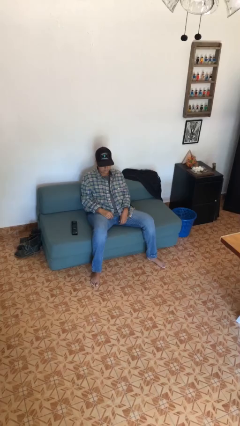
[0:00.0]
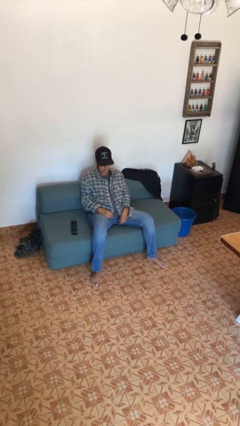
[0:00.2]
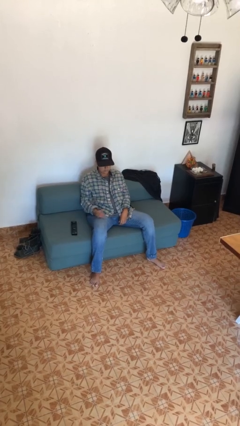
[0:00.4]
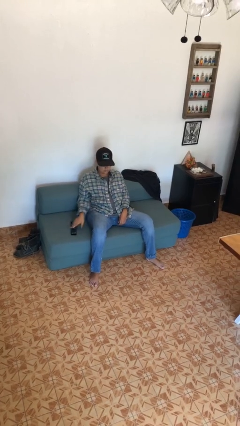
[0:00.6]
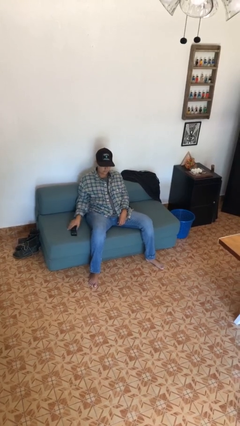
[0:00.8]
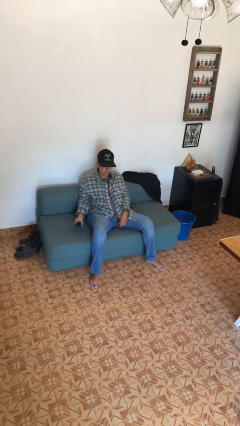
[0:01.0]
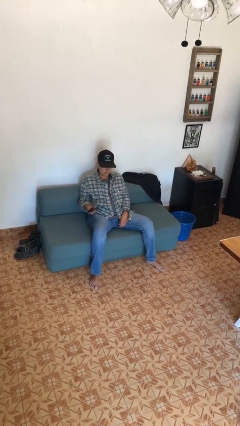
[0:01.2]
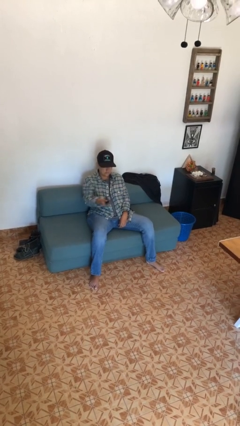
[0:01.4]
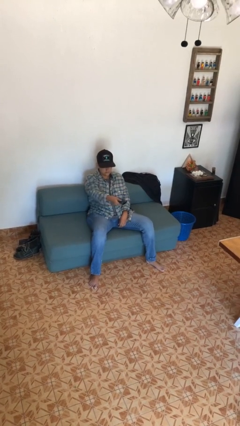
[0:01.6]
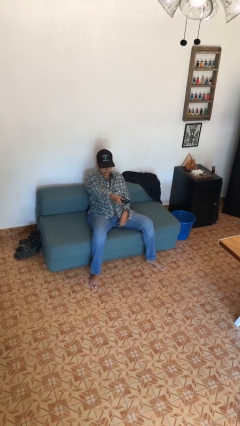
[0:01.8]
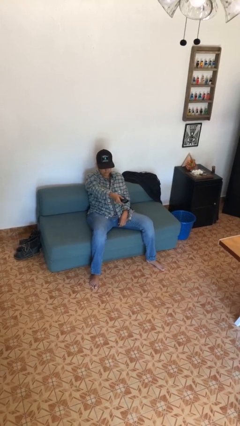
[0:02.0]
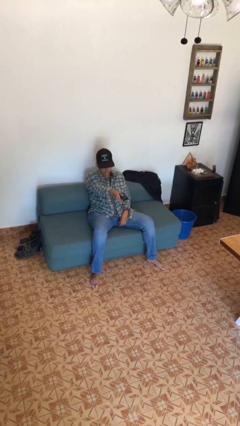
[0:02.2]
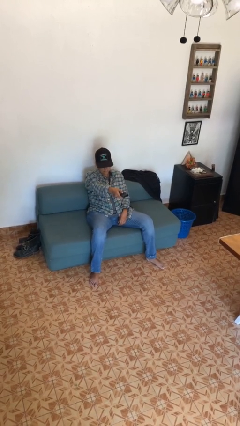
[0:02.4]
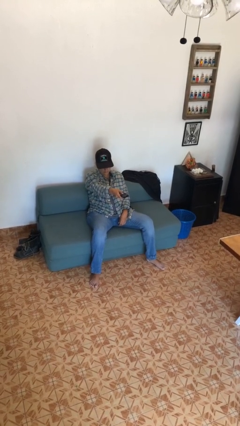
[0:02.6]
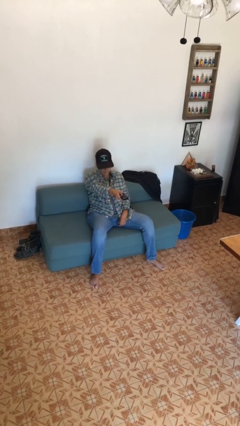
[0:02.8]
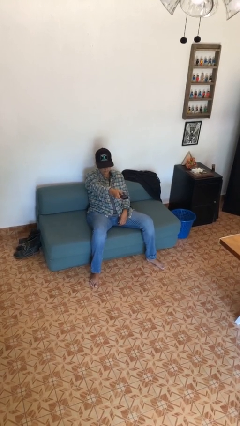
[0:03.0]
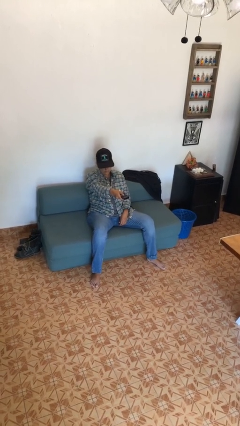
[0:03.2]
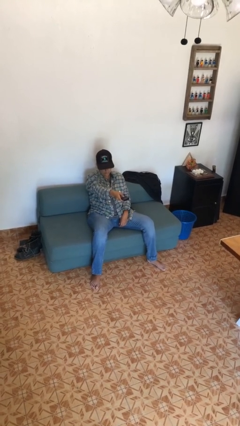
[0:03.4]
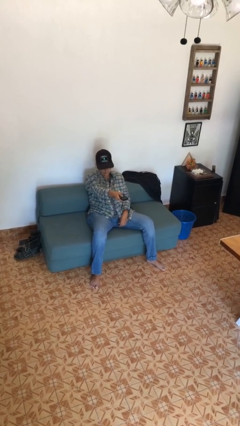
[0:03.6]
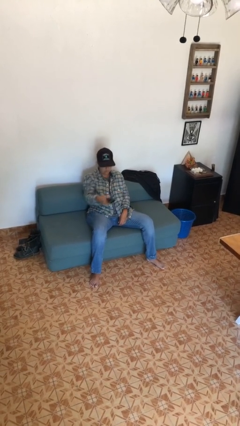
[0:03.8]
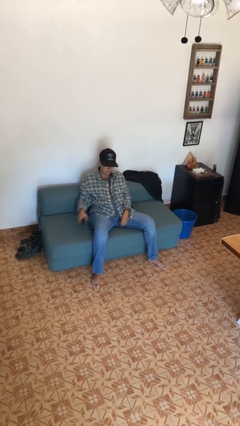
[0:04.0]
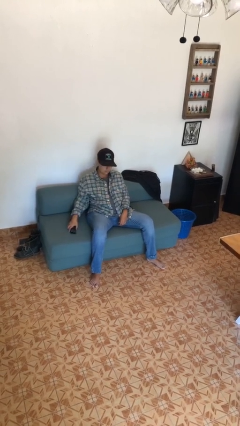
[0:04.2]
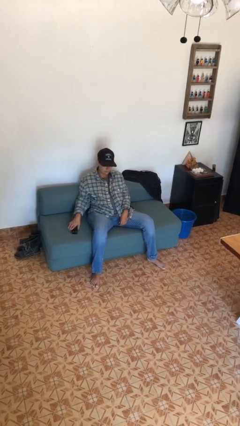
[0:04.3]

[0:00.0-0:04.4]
person uses television remote

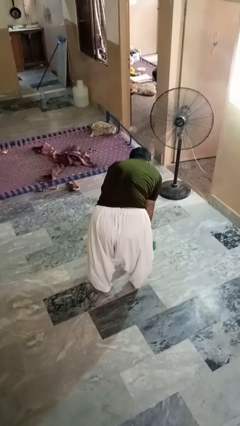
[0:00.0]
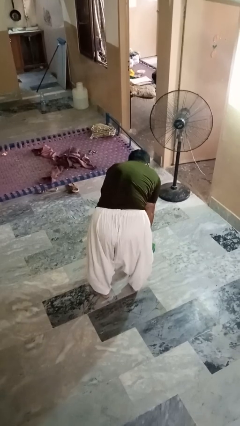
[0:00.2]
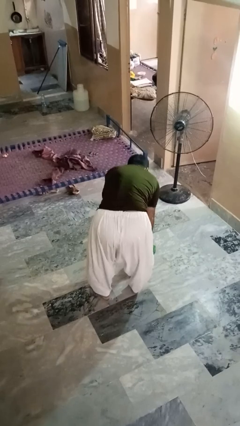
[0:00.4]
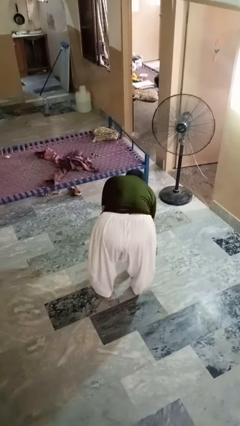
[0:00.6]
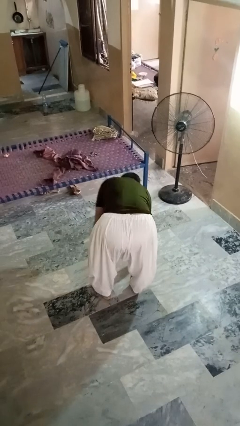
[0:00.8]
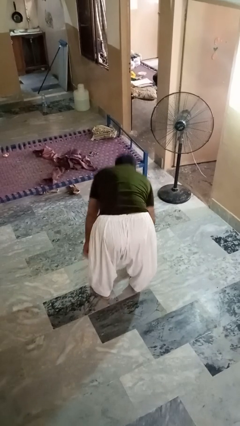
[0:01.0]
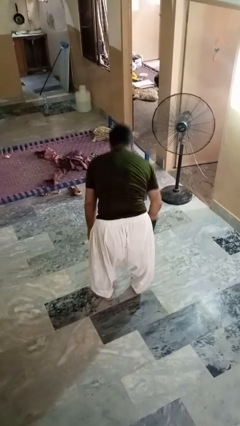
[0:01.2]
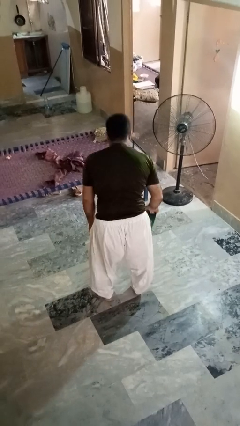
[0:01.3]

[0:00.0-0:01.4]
person picks up object from floor

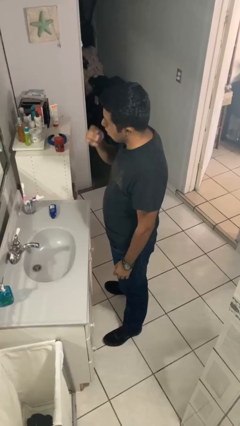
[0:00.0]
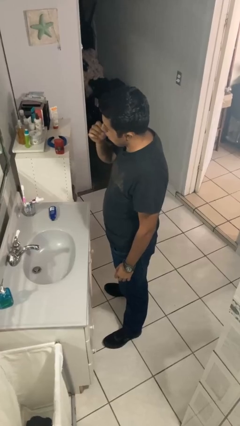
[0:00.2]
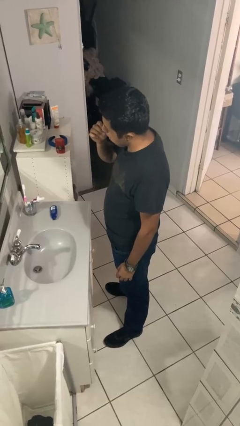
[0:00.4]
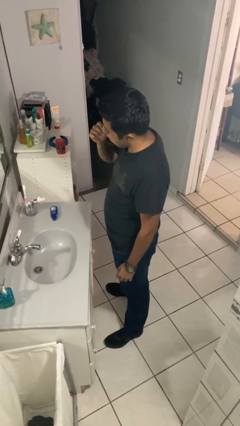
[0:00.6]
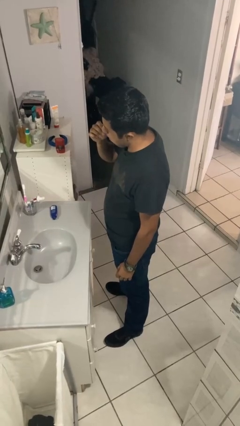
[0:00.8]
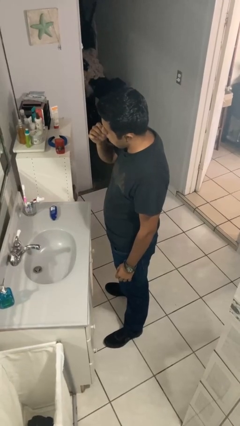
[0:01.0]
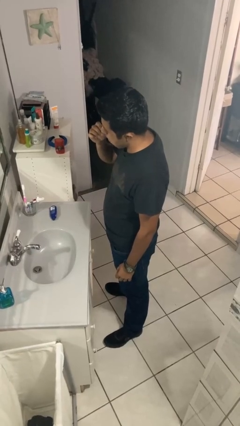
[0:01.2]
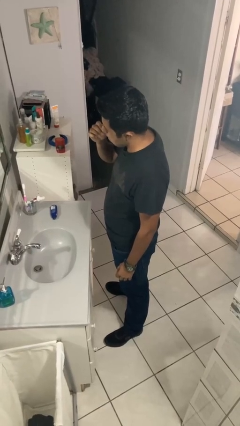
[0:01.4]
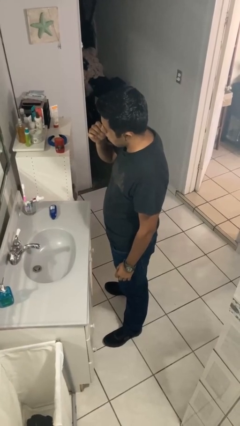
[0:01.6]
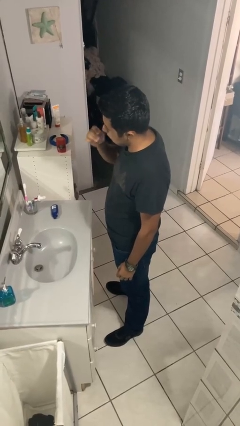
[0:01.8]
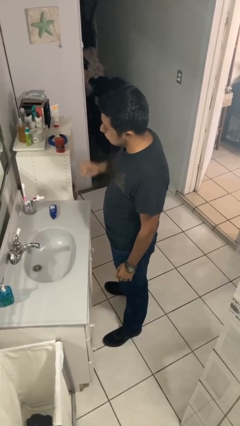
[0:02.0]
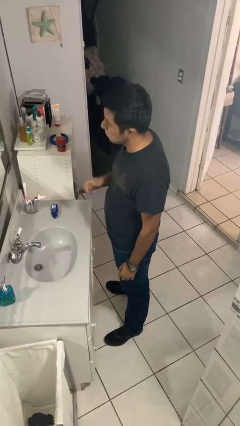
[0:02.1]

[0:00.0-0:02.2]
person flosses

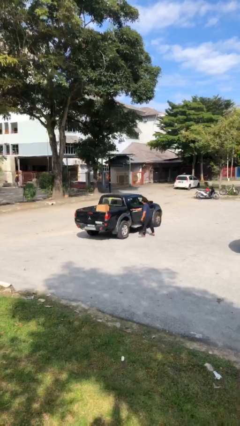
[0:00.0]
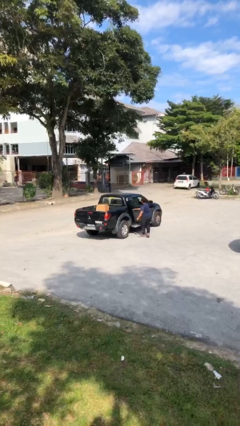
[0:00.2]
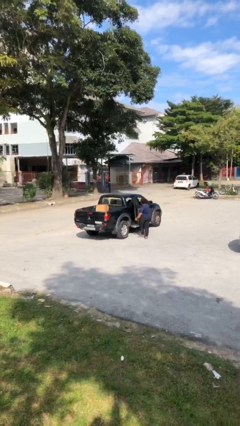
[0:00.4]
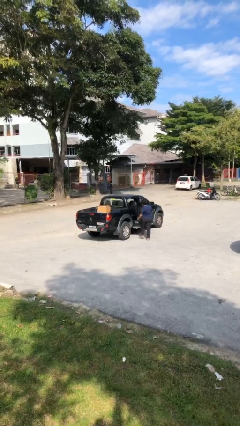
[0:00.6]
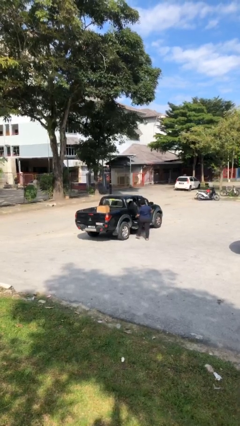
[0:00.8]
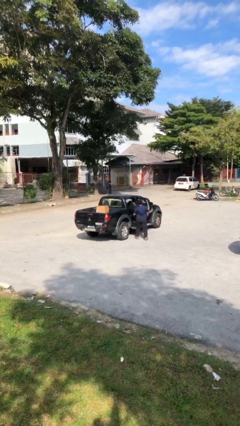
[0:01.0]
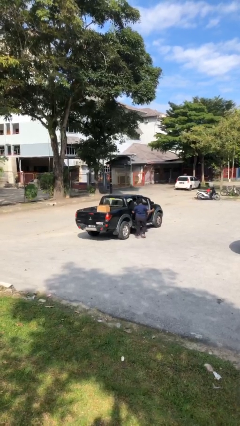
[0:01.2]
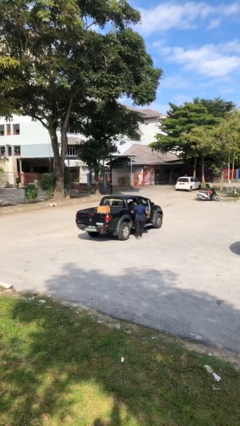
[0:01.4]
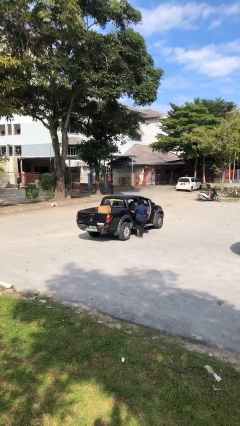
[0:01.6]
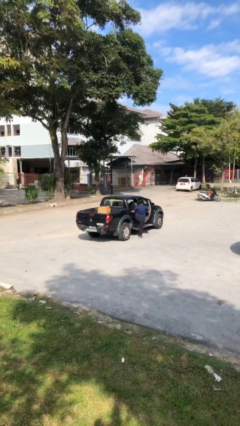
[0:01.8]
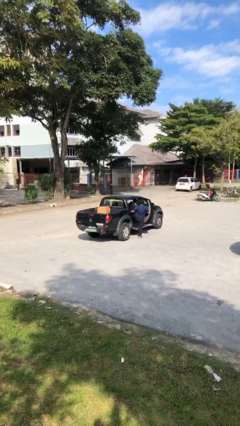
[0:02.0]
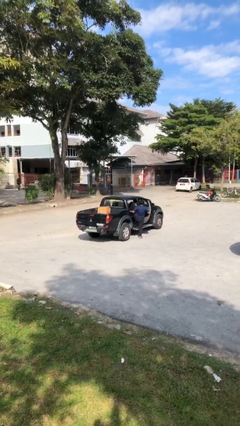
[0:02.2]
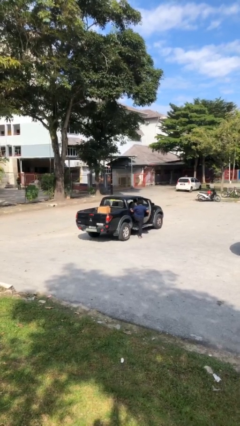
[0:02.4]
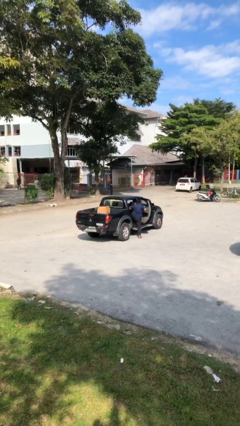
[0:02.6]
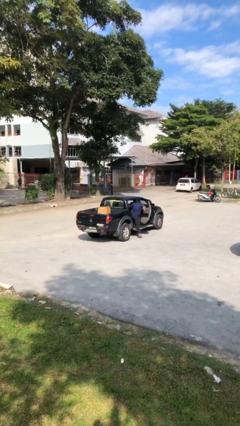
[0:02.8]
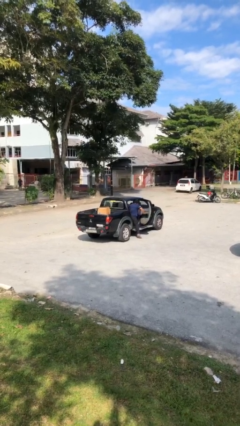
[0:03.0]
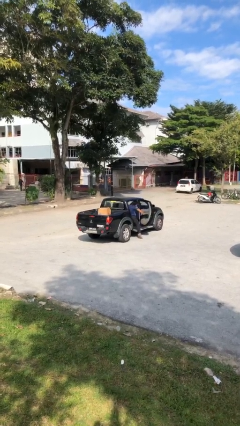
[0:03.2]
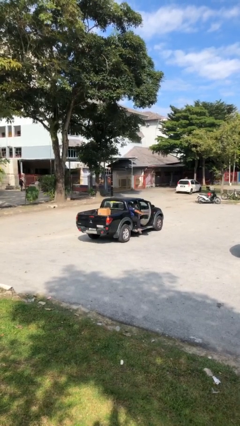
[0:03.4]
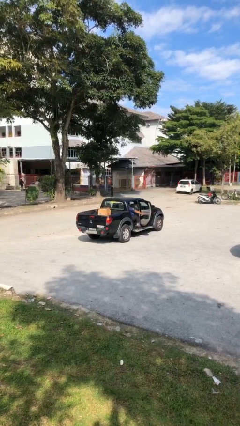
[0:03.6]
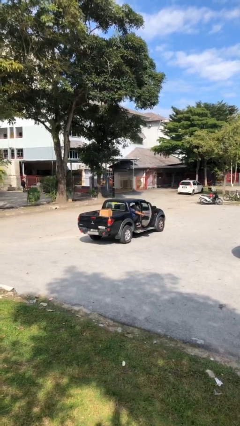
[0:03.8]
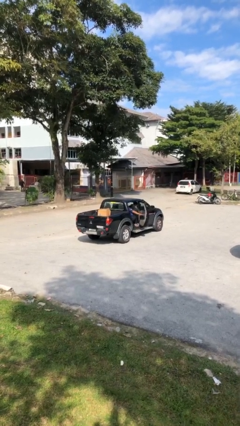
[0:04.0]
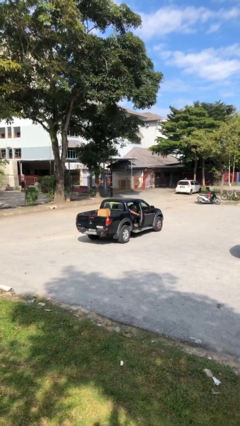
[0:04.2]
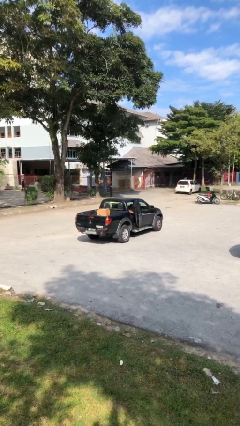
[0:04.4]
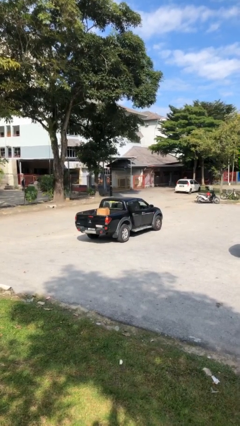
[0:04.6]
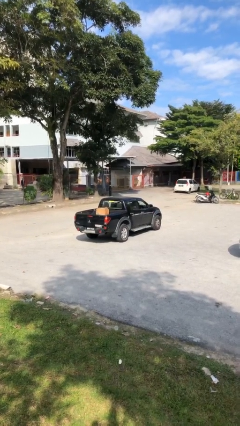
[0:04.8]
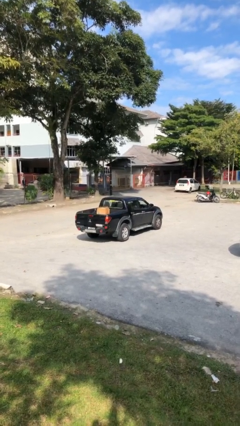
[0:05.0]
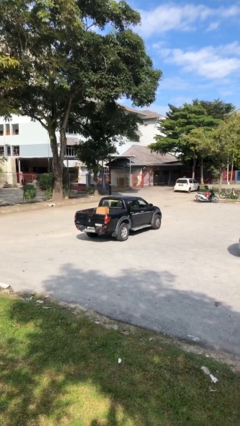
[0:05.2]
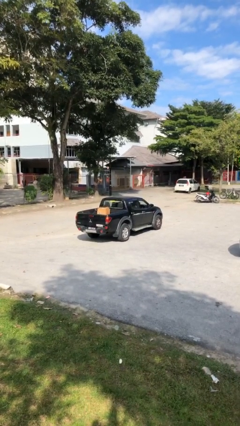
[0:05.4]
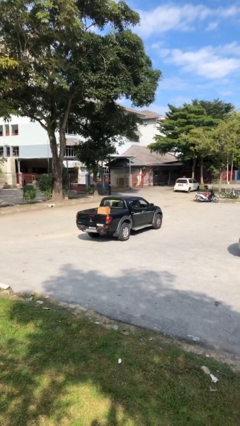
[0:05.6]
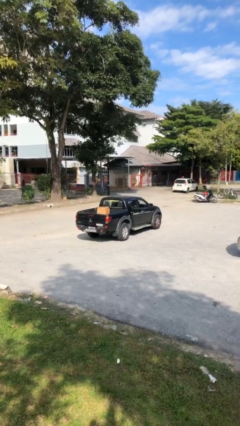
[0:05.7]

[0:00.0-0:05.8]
car picks up person

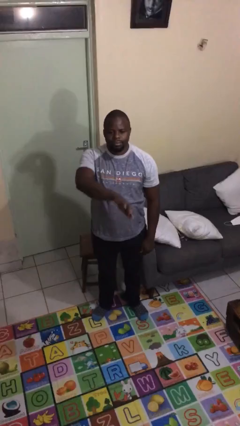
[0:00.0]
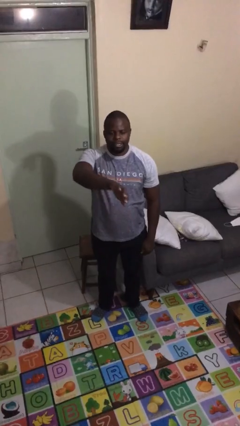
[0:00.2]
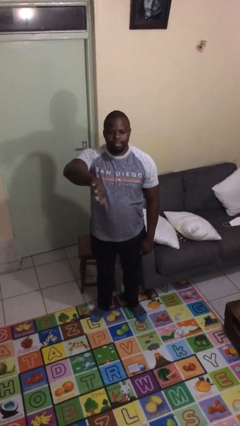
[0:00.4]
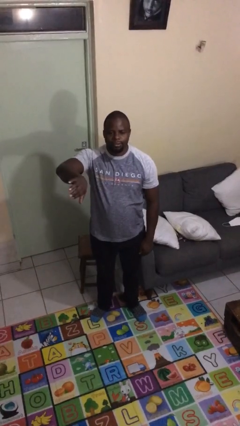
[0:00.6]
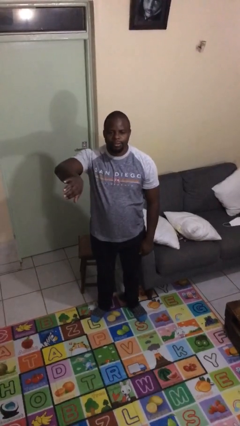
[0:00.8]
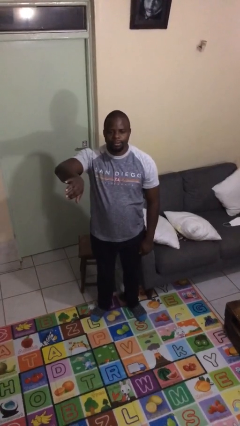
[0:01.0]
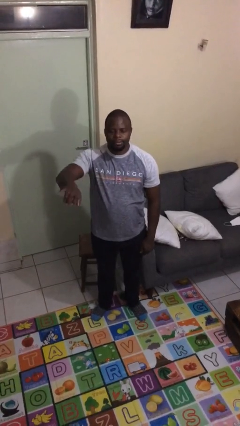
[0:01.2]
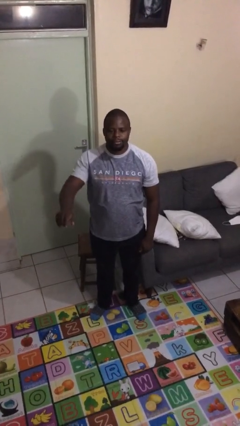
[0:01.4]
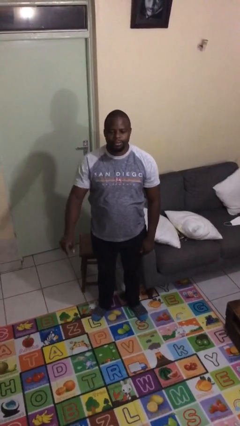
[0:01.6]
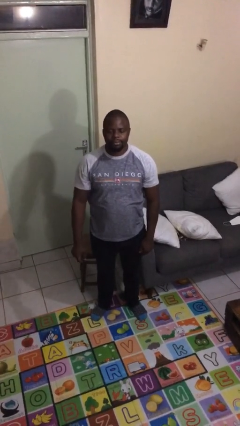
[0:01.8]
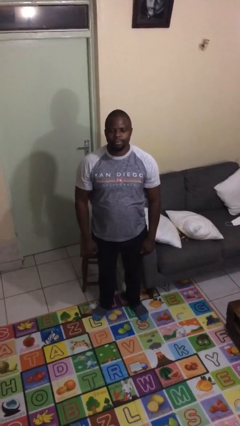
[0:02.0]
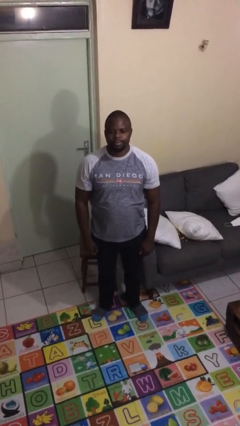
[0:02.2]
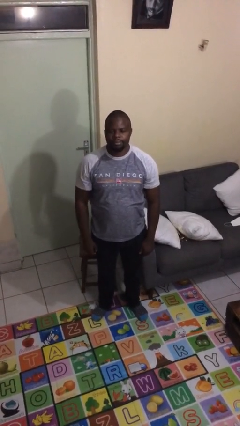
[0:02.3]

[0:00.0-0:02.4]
person gestures swipe right

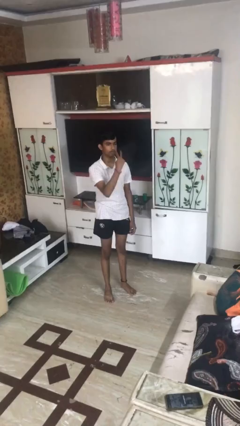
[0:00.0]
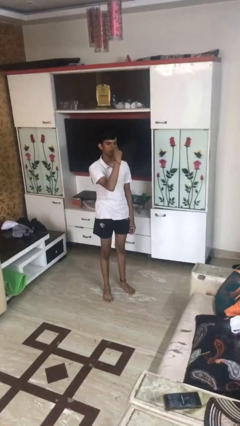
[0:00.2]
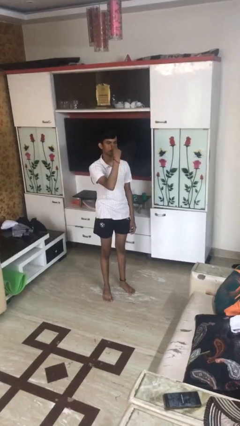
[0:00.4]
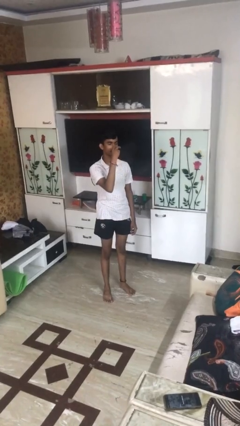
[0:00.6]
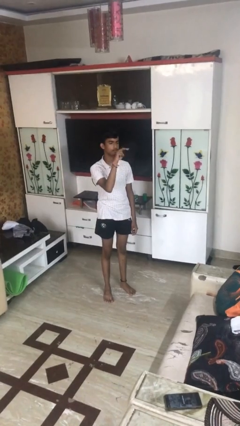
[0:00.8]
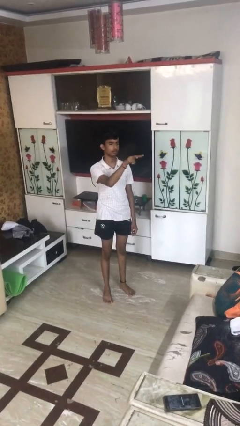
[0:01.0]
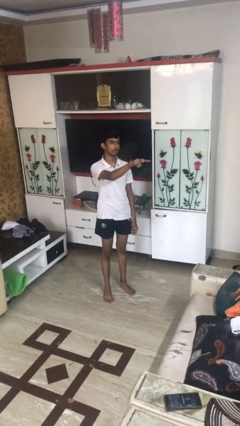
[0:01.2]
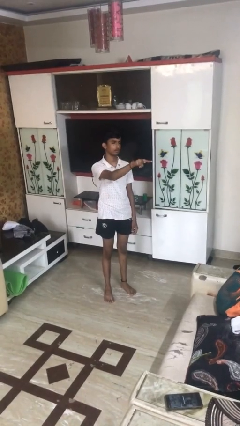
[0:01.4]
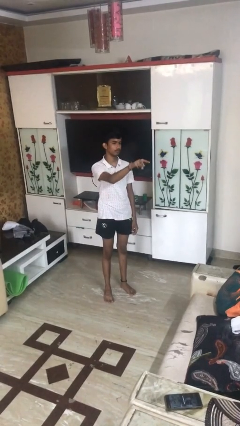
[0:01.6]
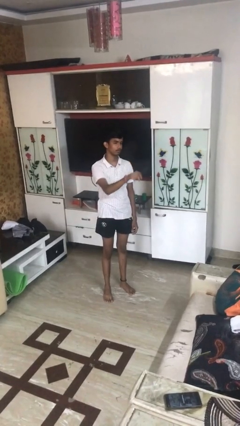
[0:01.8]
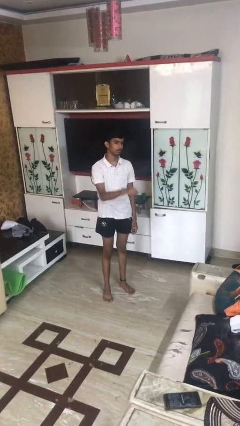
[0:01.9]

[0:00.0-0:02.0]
person gestures watch closely
